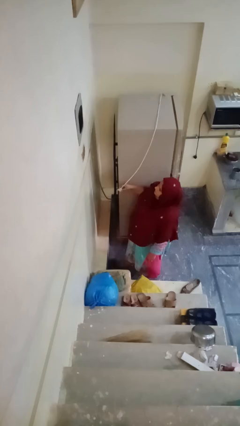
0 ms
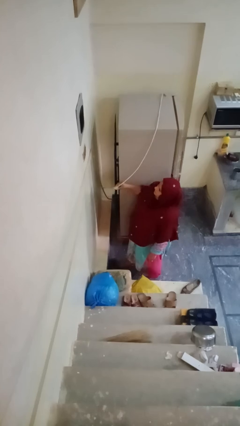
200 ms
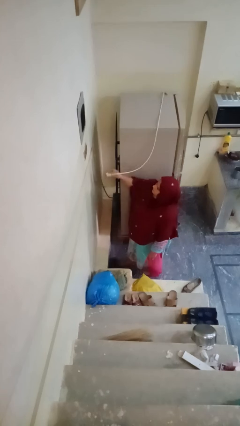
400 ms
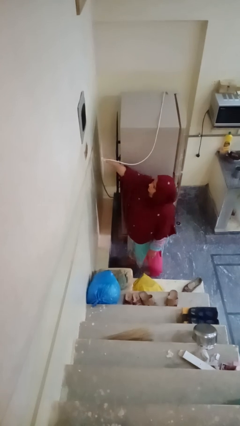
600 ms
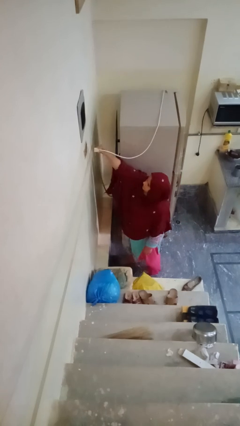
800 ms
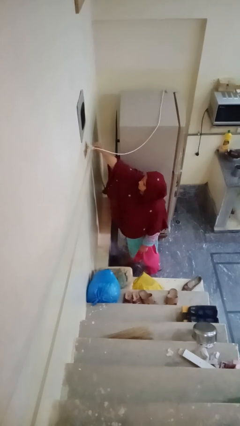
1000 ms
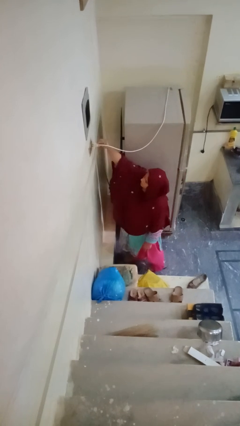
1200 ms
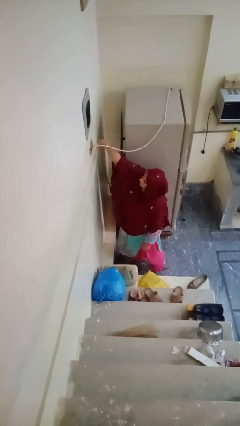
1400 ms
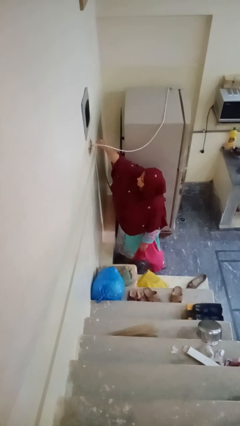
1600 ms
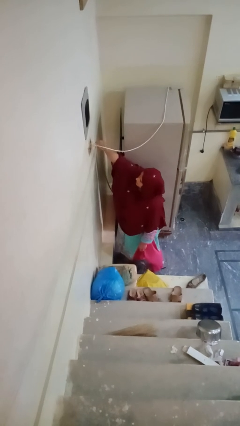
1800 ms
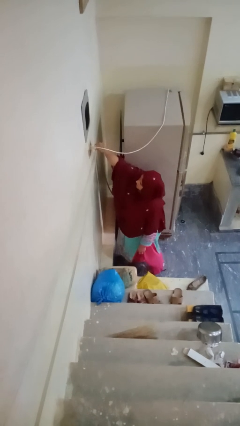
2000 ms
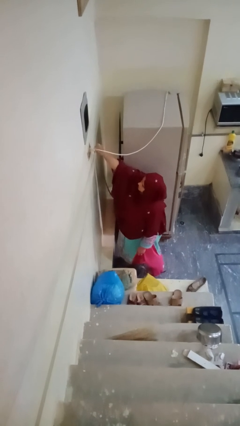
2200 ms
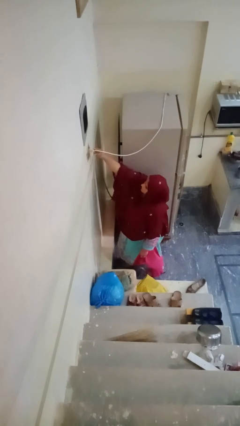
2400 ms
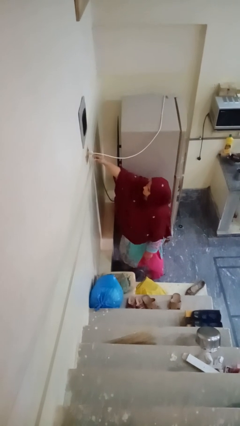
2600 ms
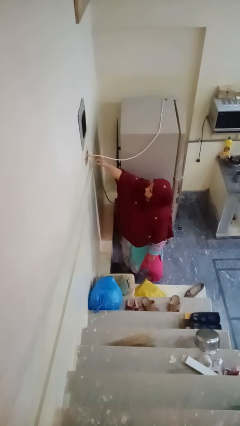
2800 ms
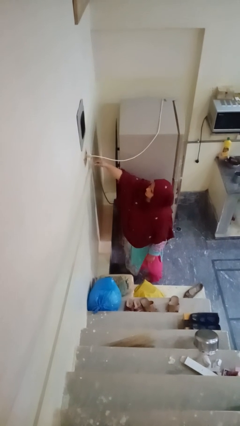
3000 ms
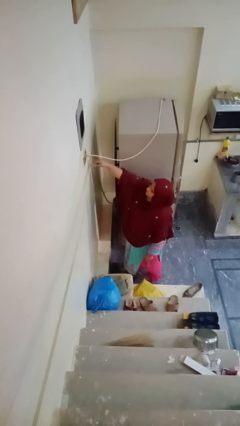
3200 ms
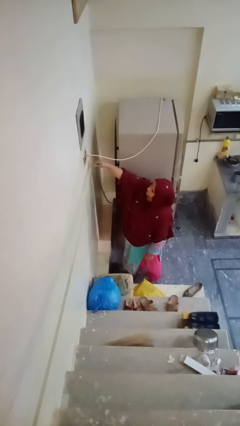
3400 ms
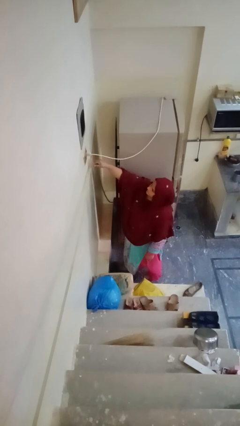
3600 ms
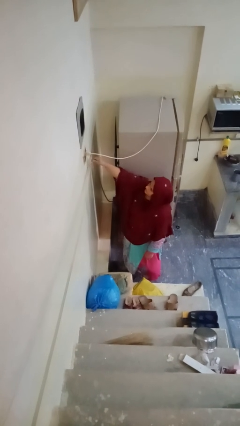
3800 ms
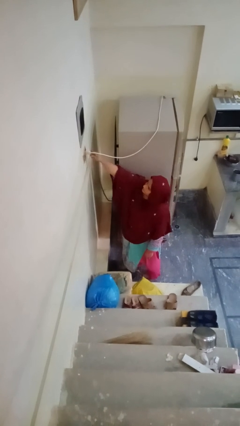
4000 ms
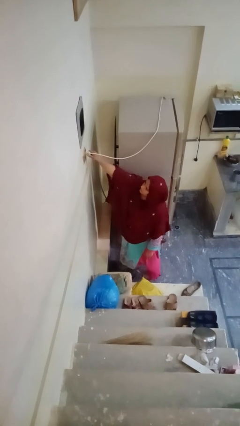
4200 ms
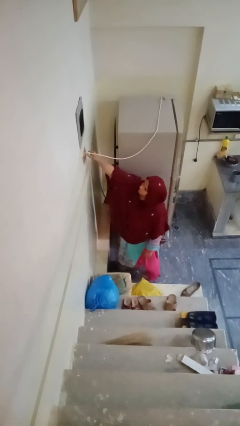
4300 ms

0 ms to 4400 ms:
person plugs into electrical socket

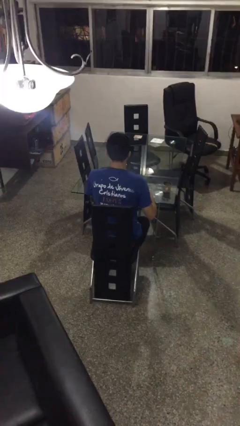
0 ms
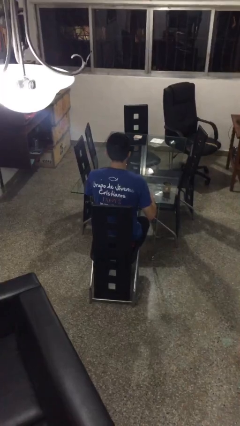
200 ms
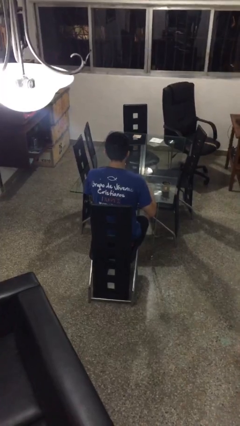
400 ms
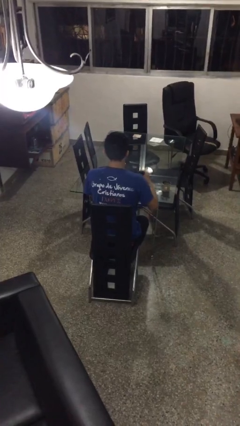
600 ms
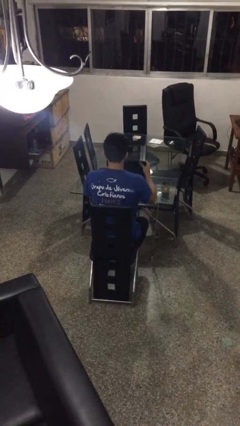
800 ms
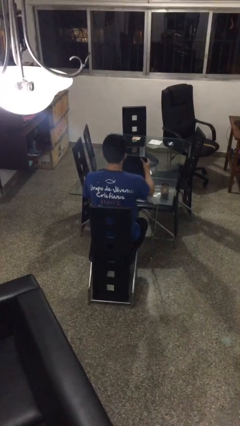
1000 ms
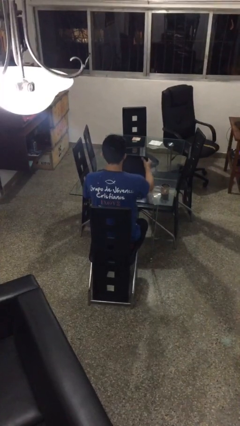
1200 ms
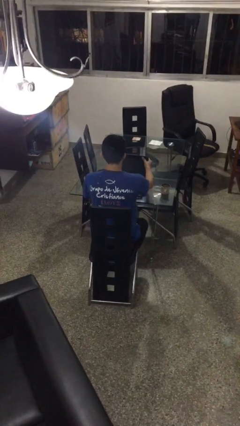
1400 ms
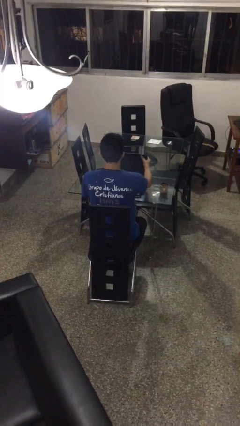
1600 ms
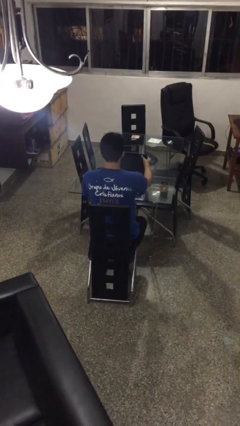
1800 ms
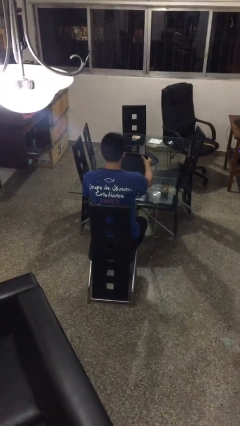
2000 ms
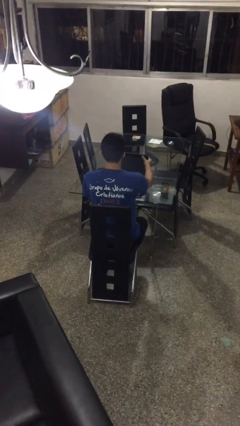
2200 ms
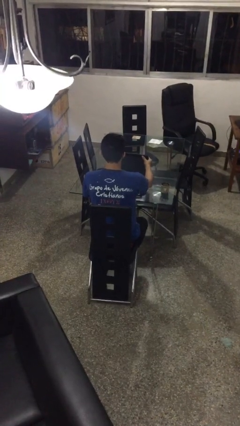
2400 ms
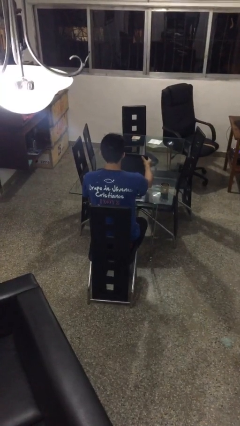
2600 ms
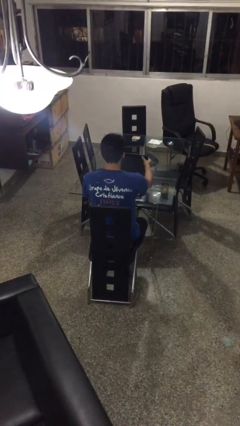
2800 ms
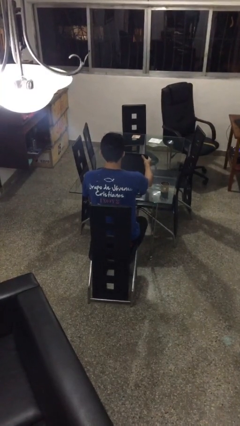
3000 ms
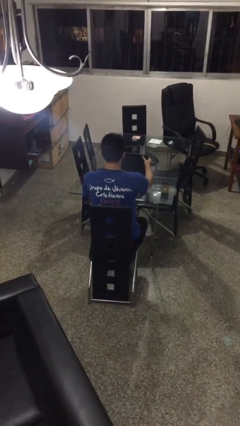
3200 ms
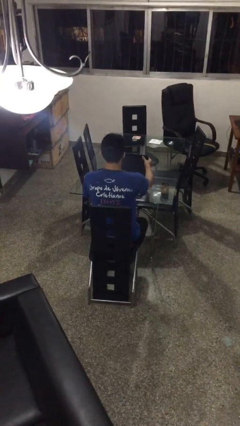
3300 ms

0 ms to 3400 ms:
person opens laptop

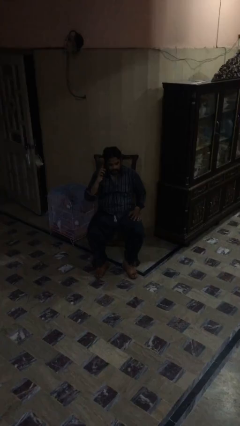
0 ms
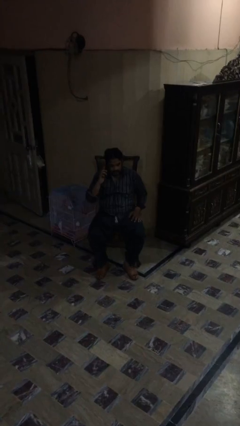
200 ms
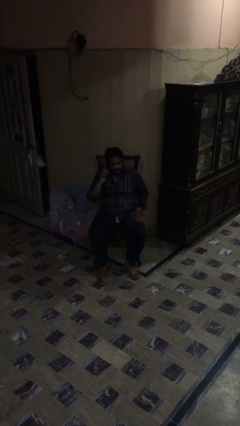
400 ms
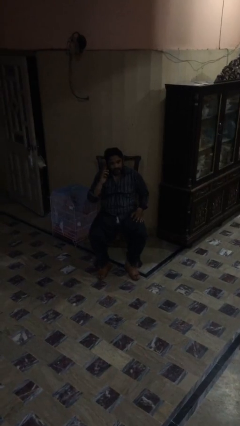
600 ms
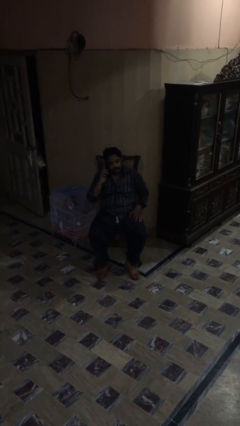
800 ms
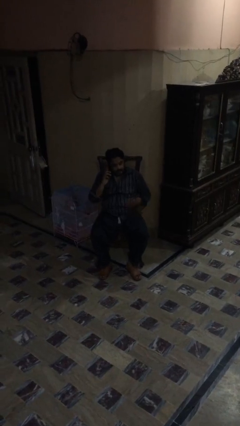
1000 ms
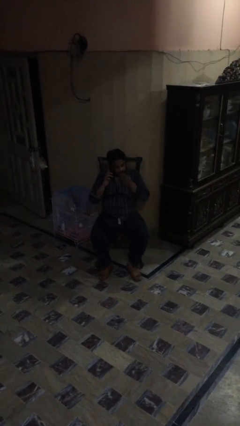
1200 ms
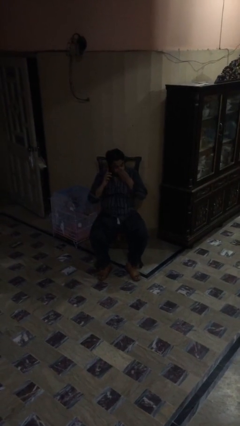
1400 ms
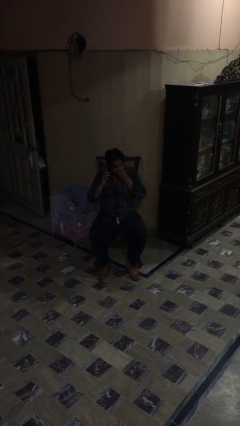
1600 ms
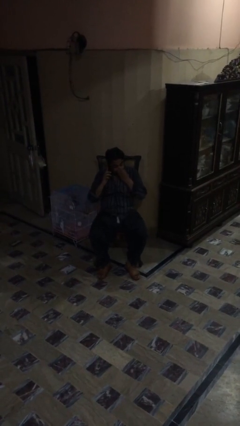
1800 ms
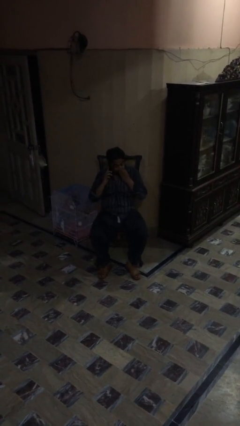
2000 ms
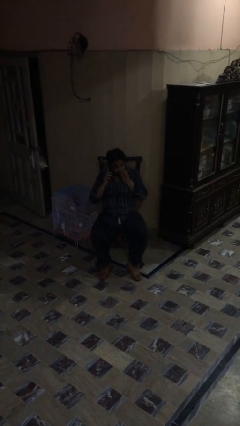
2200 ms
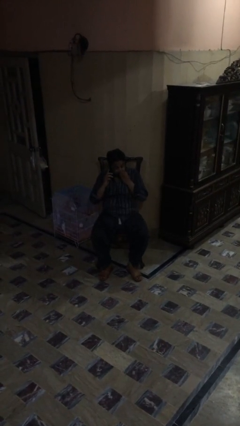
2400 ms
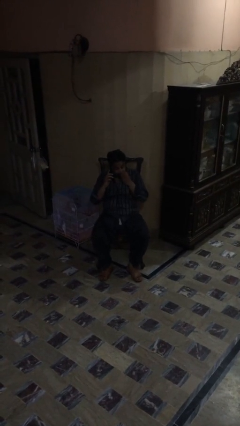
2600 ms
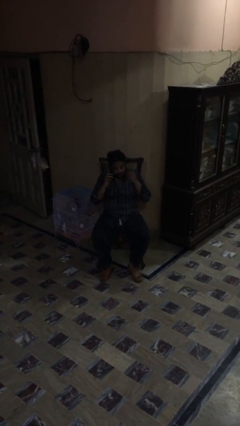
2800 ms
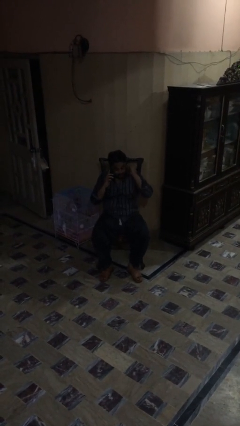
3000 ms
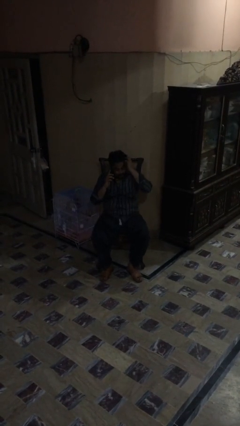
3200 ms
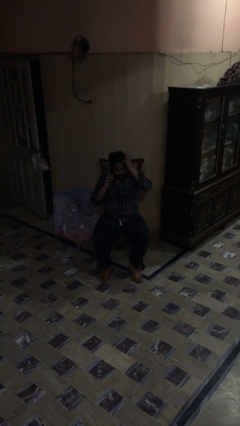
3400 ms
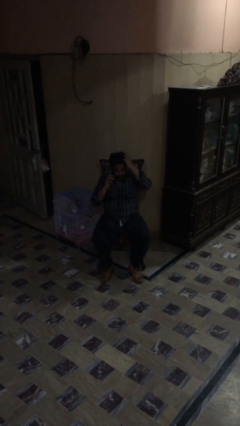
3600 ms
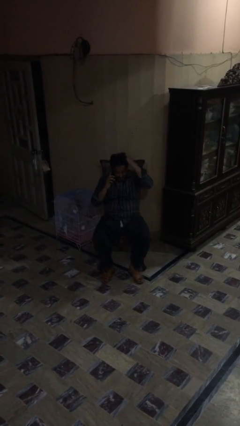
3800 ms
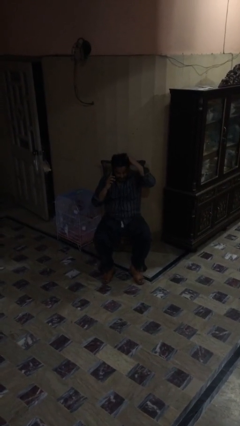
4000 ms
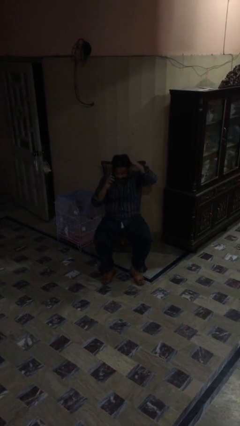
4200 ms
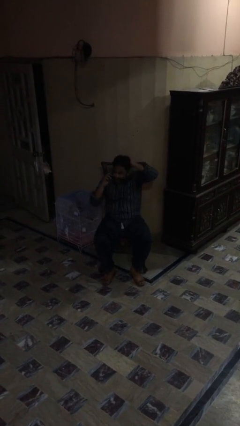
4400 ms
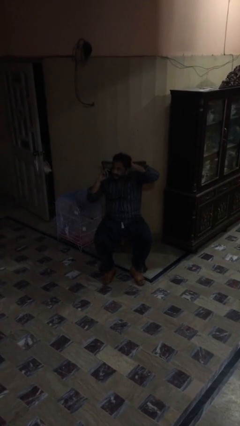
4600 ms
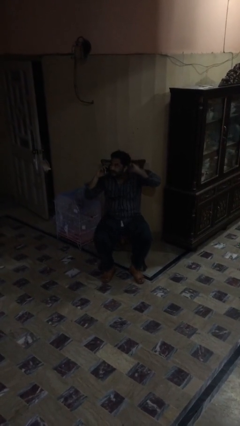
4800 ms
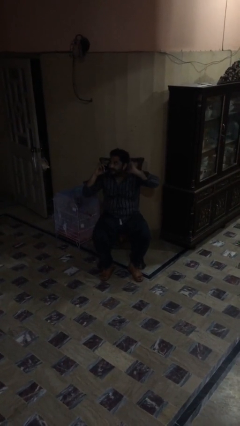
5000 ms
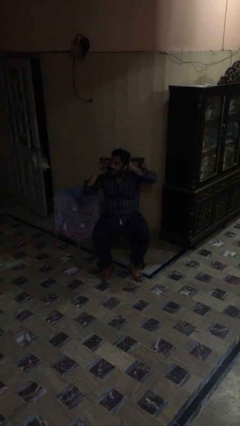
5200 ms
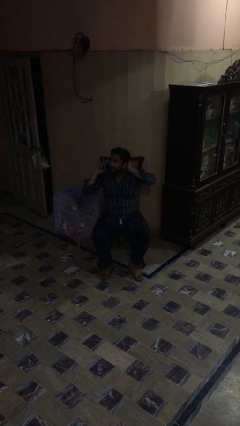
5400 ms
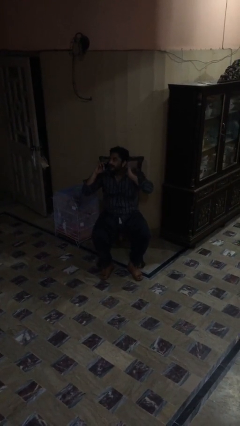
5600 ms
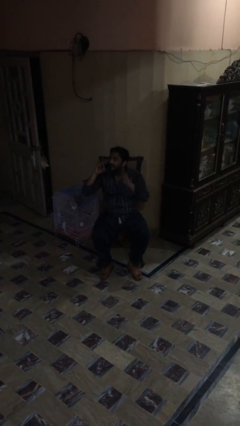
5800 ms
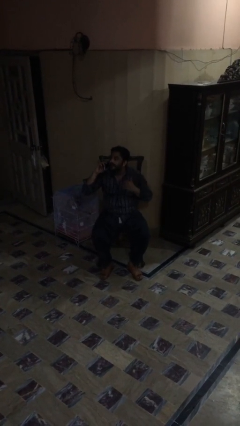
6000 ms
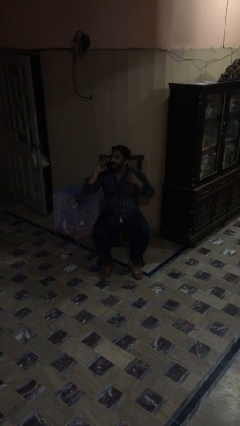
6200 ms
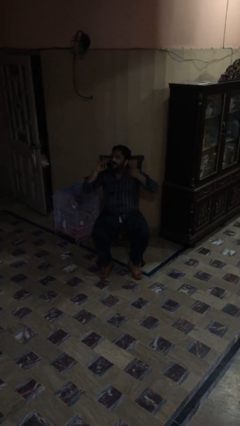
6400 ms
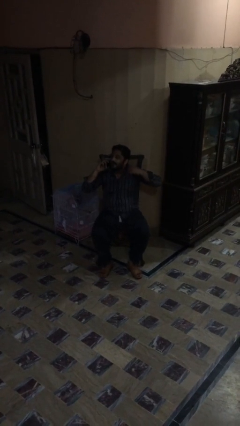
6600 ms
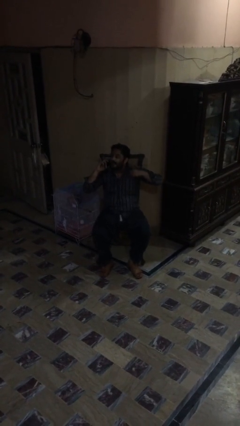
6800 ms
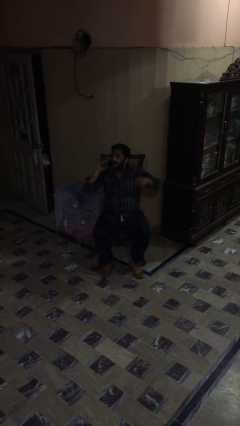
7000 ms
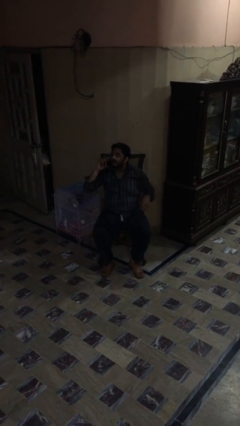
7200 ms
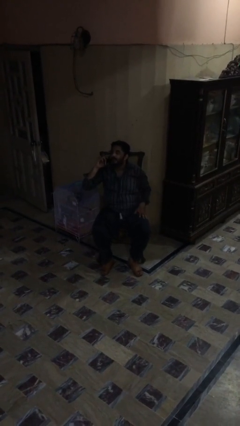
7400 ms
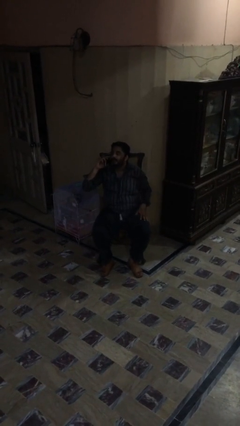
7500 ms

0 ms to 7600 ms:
person talks on phone

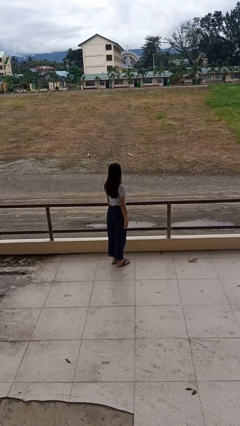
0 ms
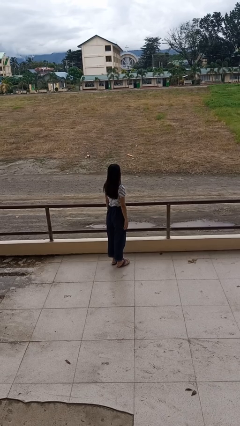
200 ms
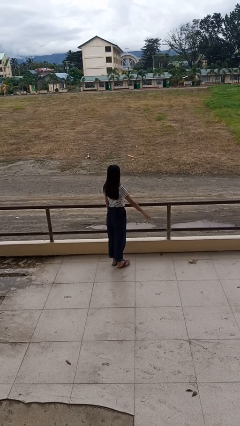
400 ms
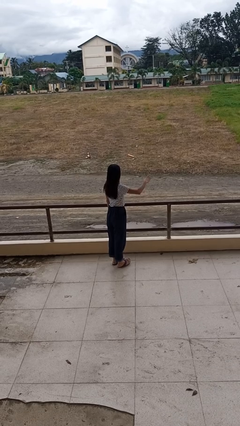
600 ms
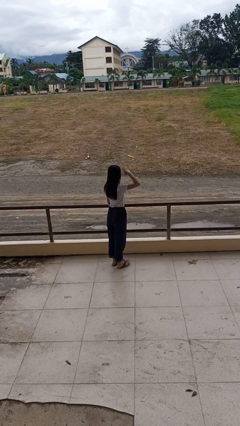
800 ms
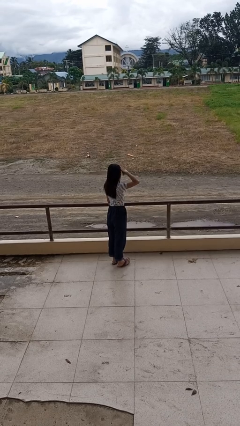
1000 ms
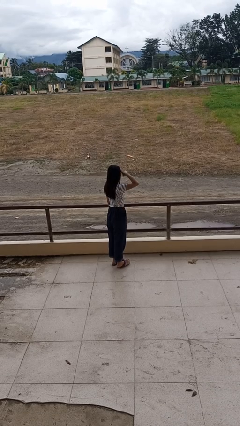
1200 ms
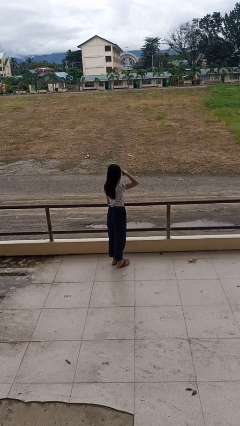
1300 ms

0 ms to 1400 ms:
person salutes

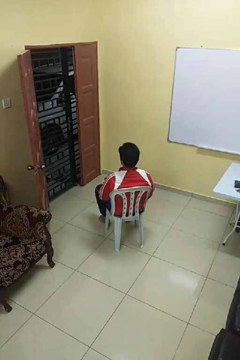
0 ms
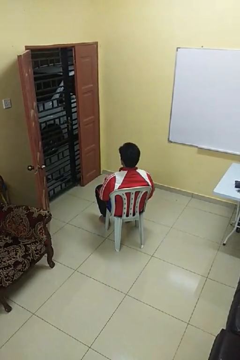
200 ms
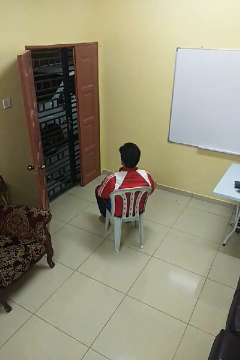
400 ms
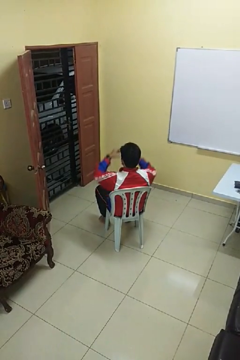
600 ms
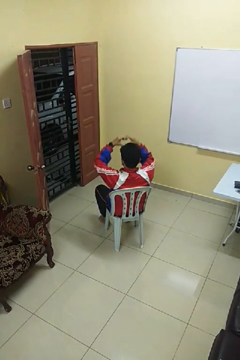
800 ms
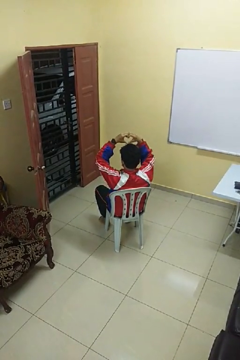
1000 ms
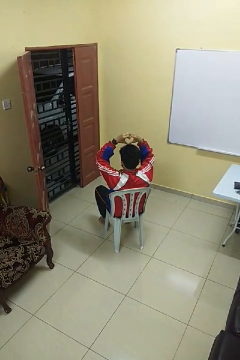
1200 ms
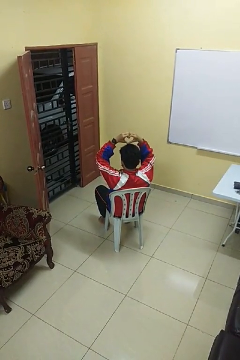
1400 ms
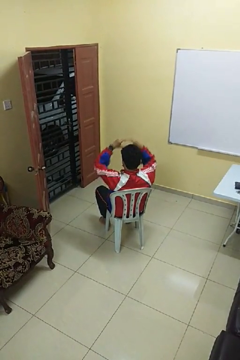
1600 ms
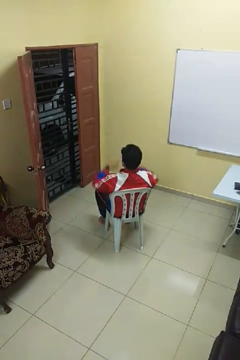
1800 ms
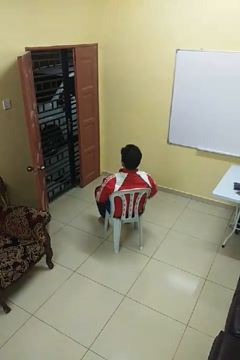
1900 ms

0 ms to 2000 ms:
person gestures heart
